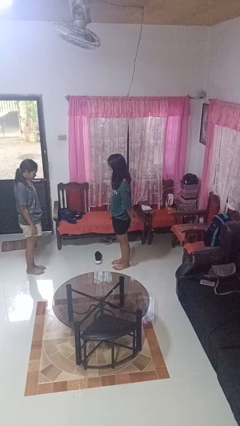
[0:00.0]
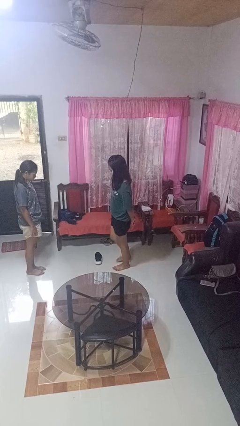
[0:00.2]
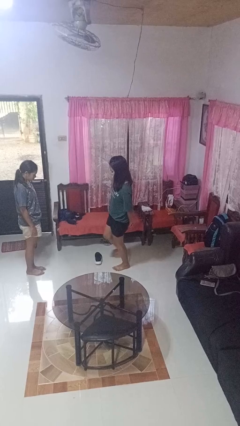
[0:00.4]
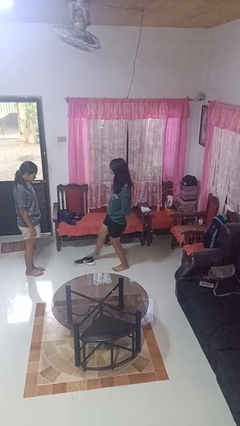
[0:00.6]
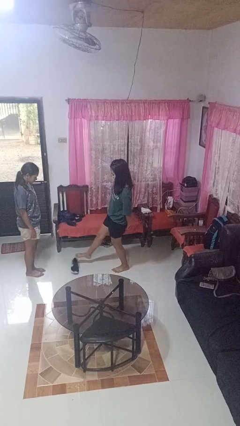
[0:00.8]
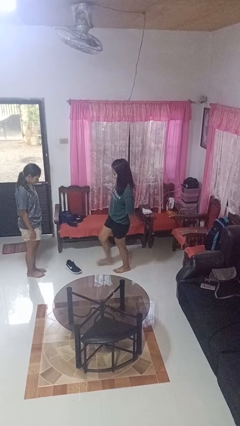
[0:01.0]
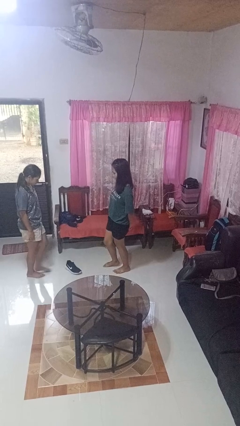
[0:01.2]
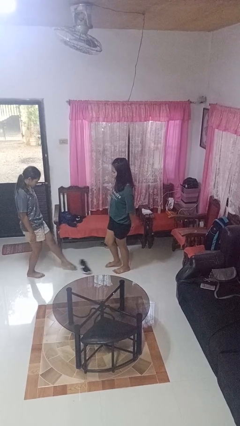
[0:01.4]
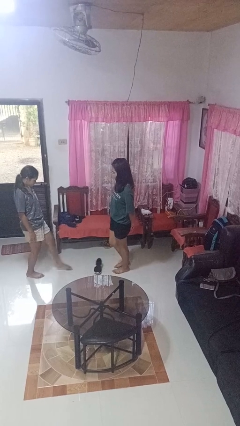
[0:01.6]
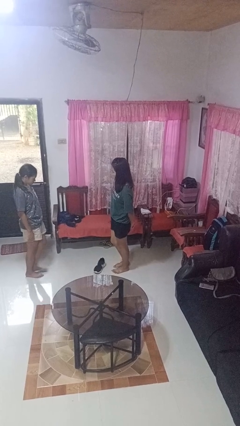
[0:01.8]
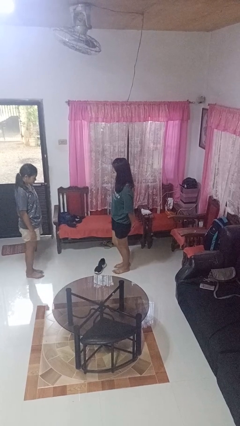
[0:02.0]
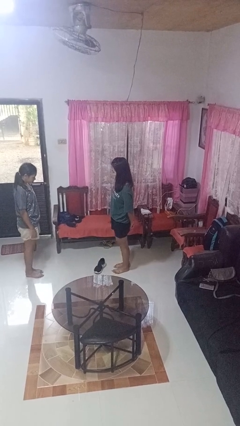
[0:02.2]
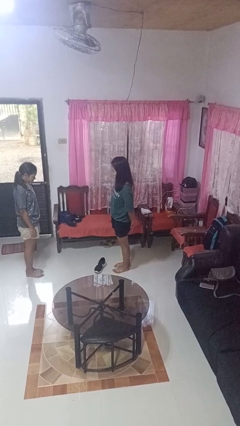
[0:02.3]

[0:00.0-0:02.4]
person kicks object to person

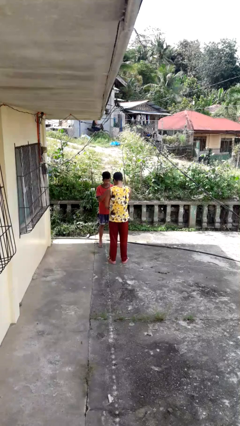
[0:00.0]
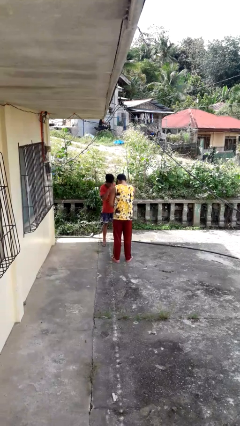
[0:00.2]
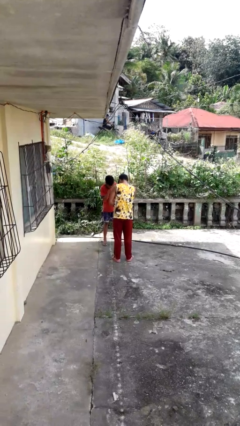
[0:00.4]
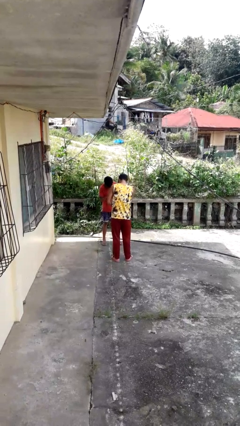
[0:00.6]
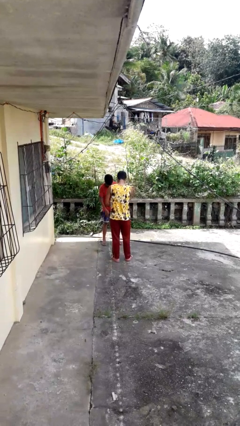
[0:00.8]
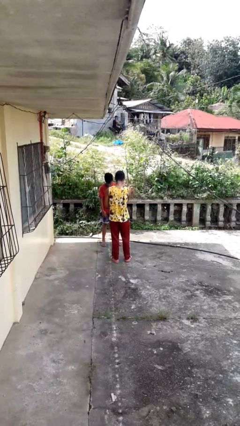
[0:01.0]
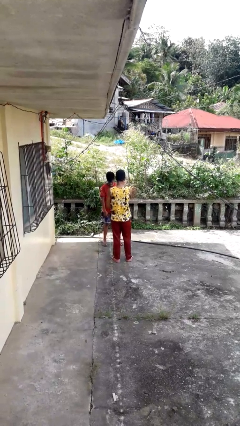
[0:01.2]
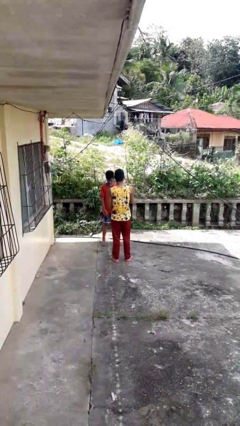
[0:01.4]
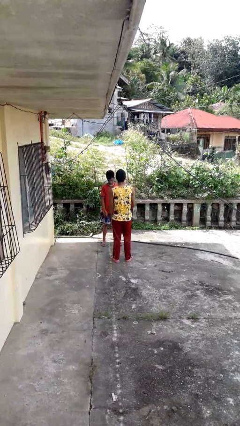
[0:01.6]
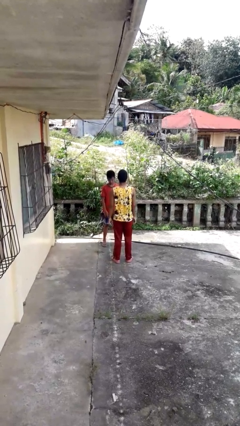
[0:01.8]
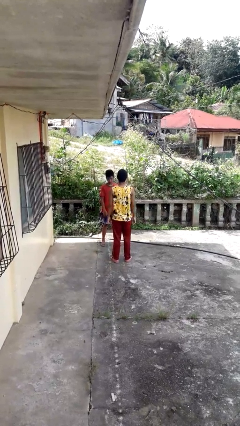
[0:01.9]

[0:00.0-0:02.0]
person laughs with person

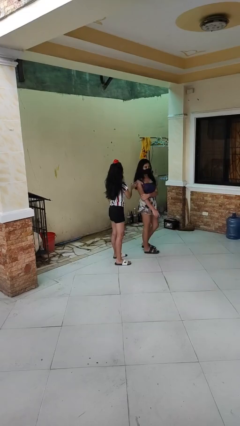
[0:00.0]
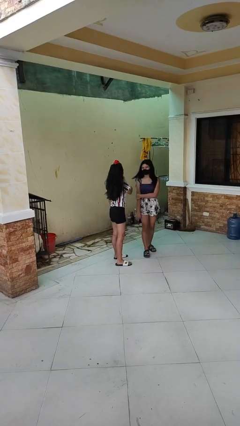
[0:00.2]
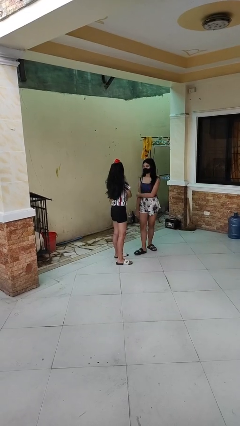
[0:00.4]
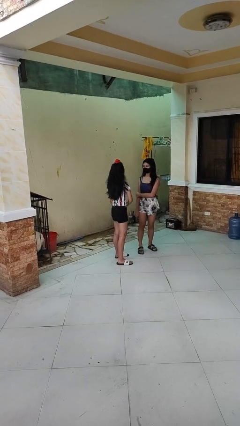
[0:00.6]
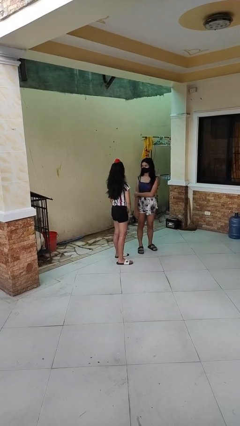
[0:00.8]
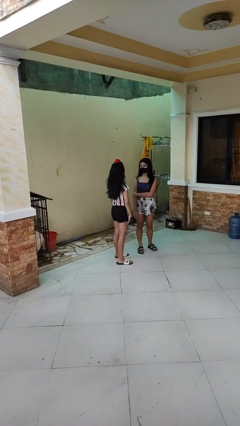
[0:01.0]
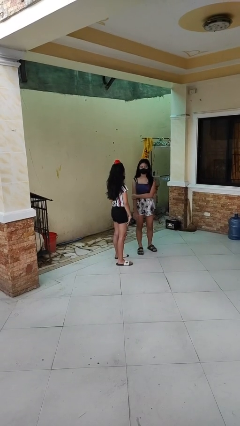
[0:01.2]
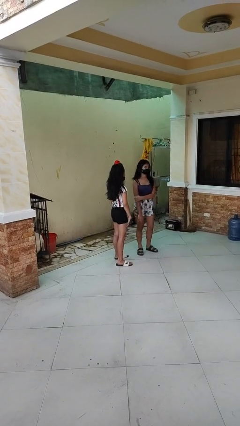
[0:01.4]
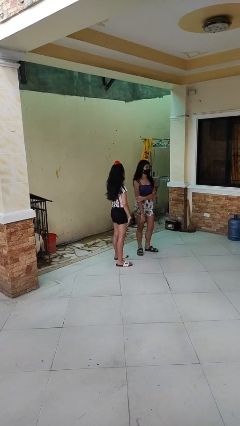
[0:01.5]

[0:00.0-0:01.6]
person spins person around

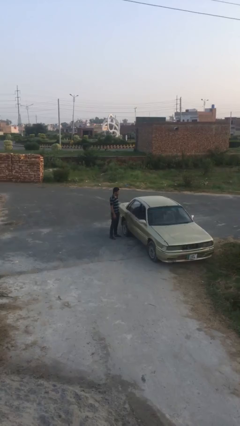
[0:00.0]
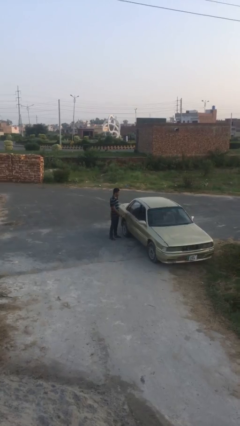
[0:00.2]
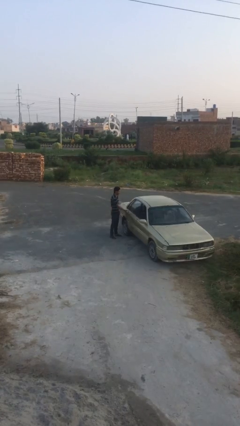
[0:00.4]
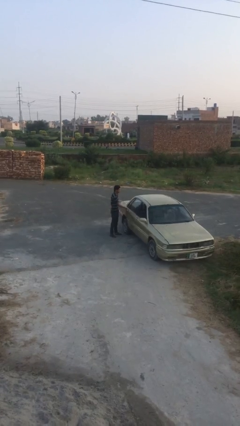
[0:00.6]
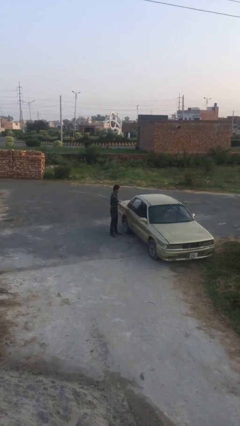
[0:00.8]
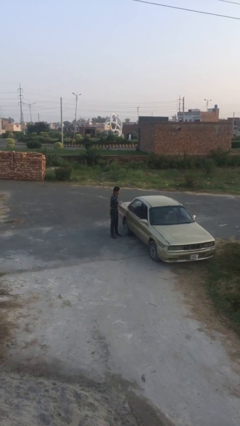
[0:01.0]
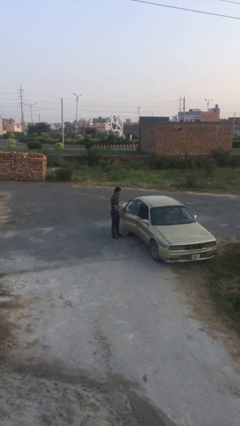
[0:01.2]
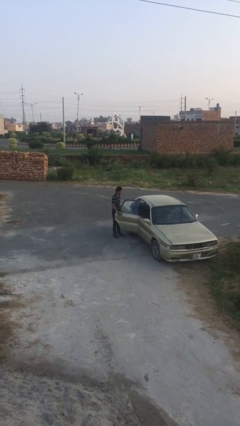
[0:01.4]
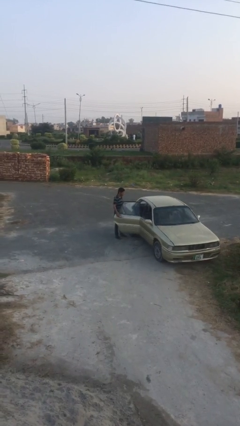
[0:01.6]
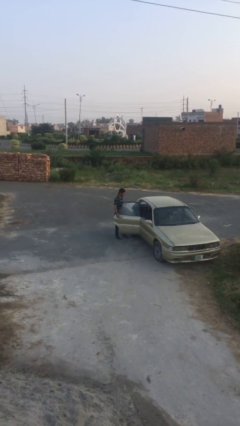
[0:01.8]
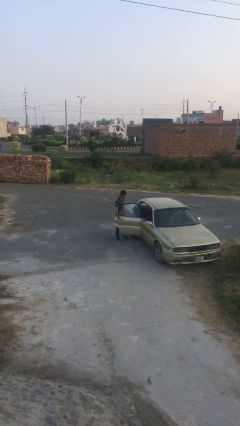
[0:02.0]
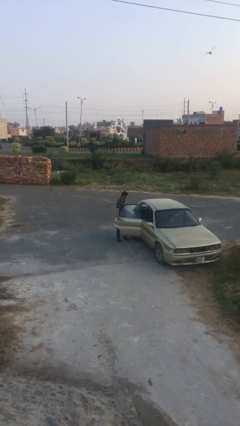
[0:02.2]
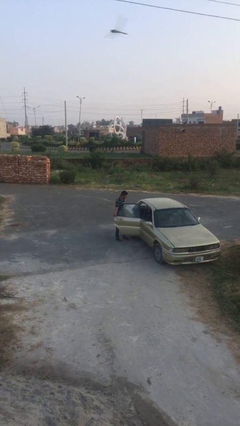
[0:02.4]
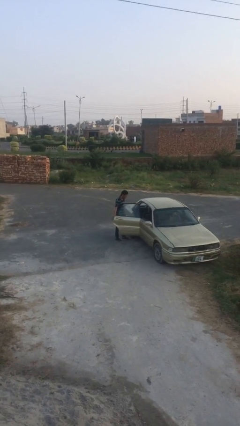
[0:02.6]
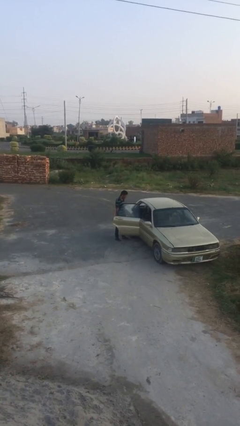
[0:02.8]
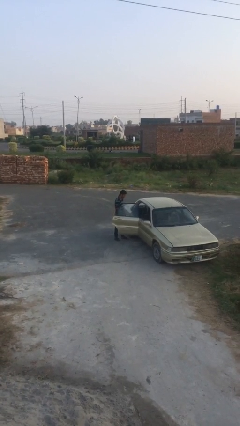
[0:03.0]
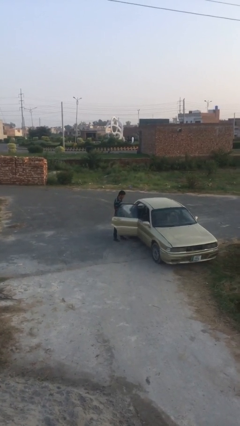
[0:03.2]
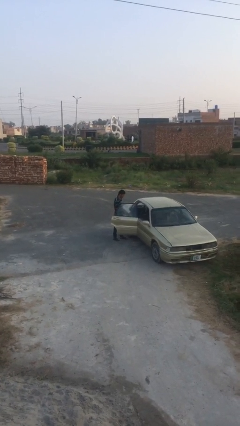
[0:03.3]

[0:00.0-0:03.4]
person opens car door

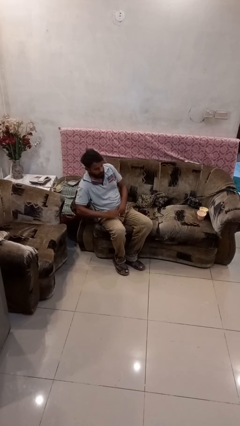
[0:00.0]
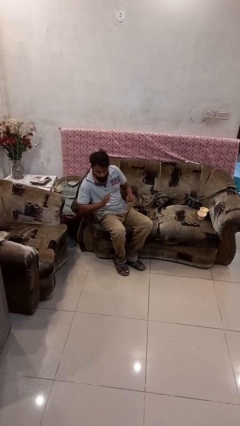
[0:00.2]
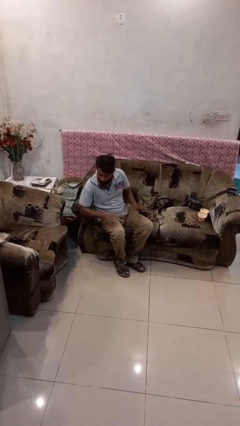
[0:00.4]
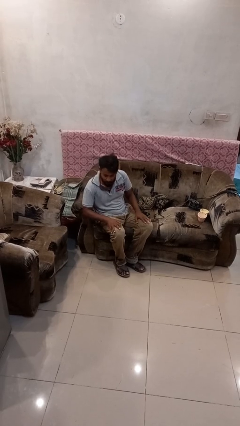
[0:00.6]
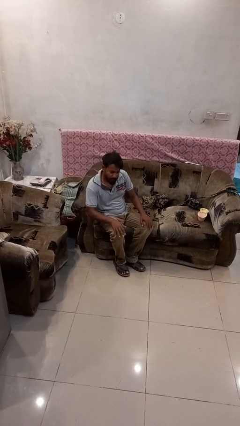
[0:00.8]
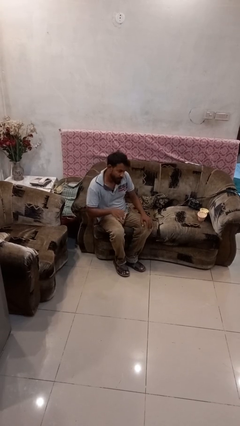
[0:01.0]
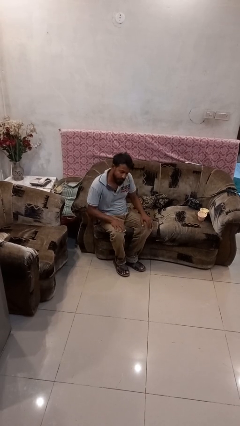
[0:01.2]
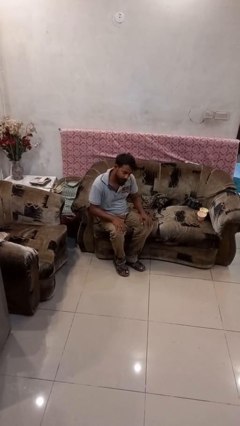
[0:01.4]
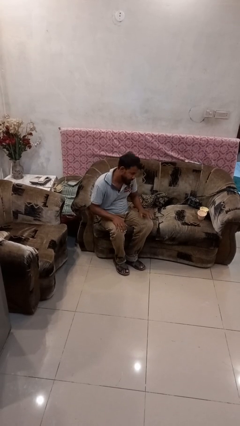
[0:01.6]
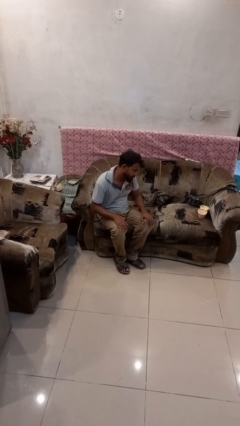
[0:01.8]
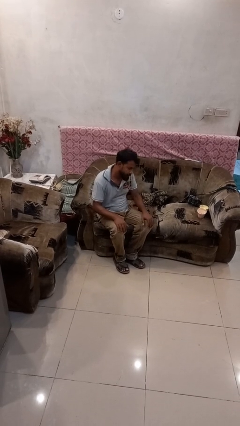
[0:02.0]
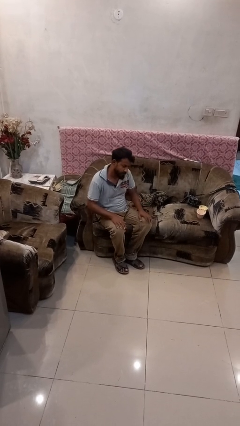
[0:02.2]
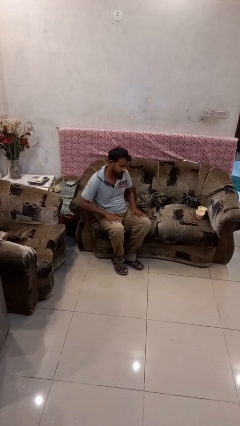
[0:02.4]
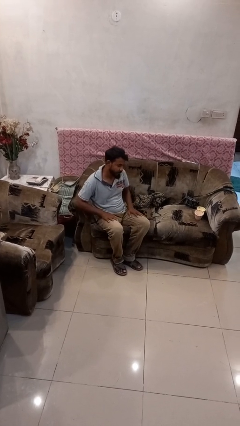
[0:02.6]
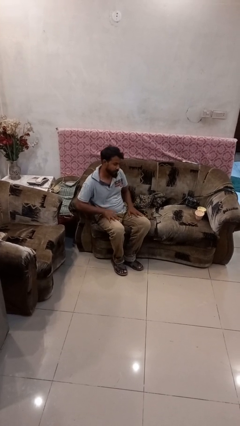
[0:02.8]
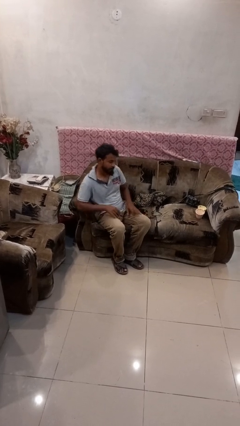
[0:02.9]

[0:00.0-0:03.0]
person slaps hands on thighs

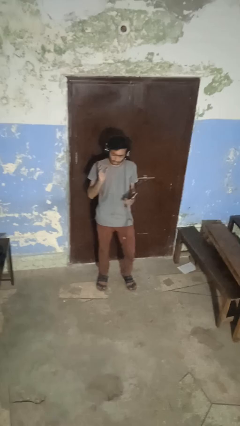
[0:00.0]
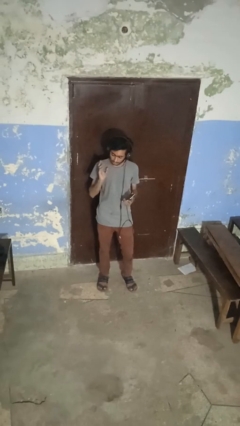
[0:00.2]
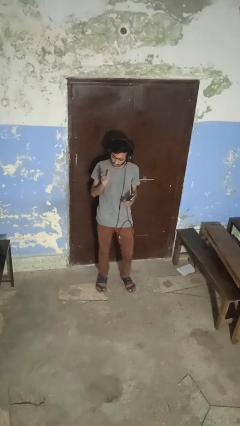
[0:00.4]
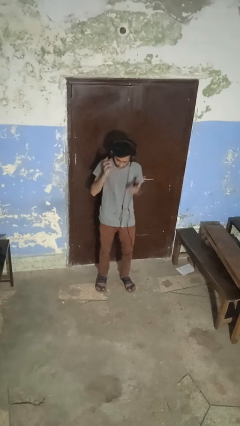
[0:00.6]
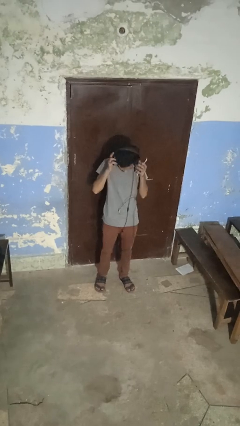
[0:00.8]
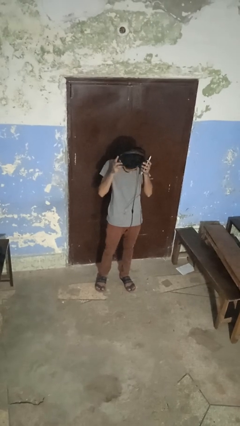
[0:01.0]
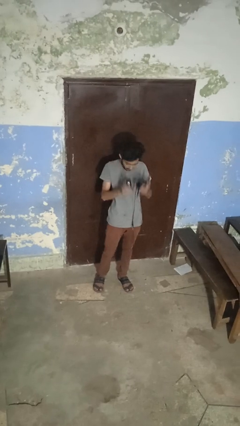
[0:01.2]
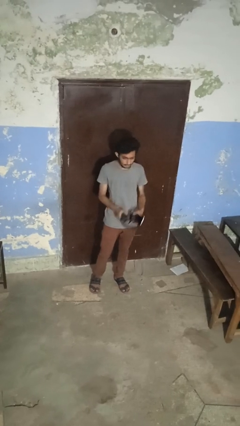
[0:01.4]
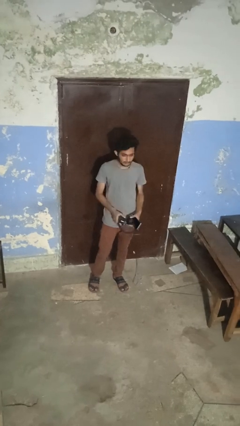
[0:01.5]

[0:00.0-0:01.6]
person takes off headphones

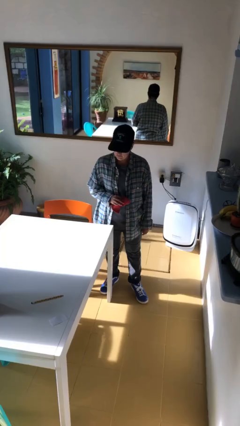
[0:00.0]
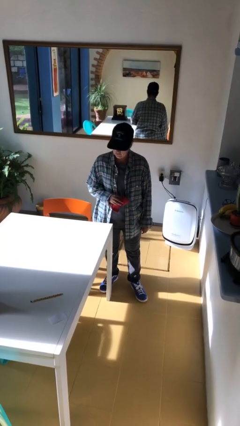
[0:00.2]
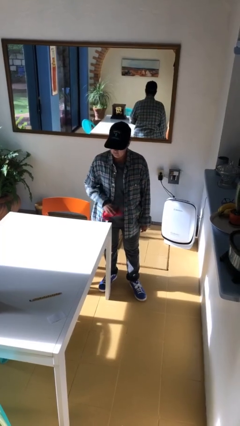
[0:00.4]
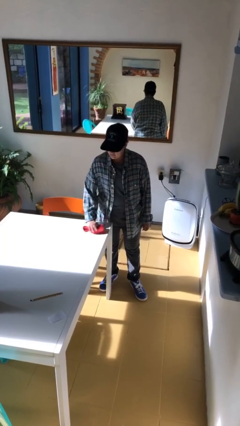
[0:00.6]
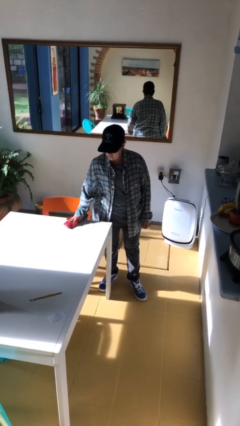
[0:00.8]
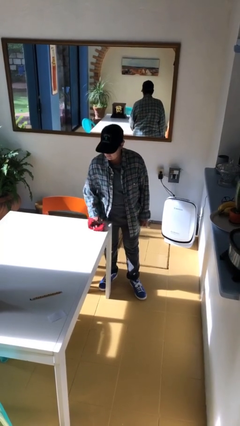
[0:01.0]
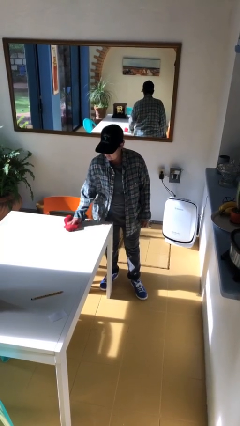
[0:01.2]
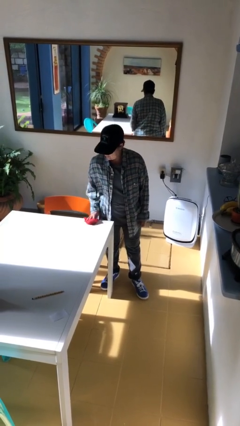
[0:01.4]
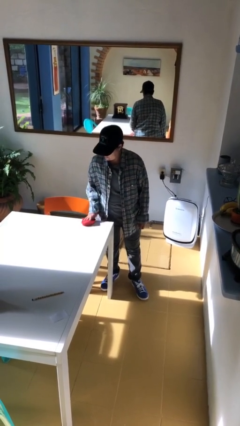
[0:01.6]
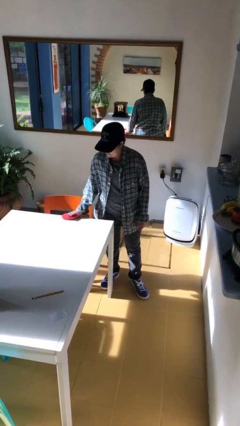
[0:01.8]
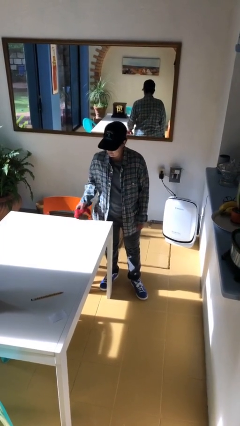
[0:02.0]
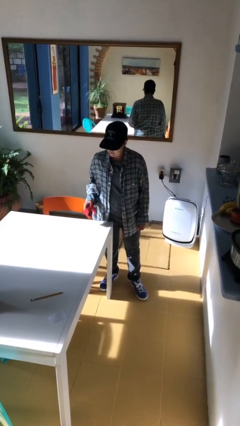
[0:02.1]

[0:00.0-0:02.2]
person cleans table with rag

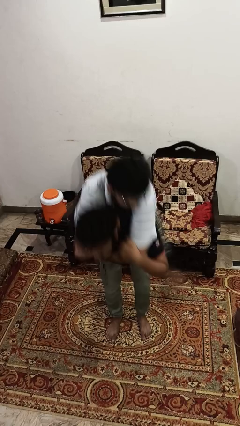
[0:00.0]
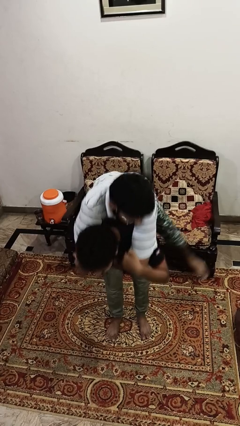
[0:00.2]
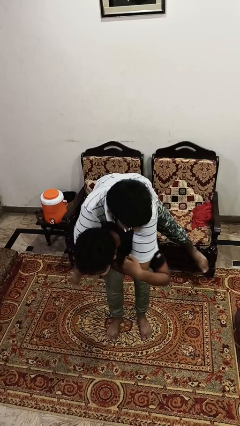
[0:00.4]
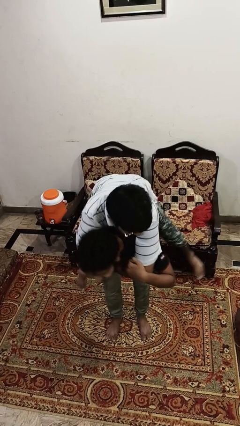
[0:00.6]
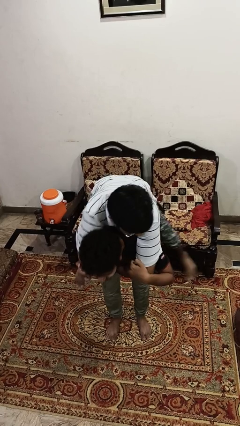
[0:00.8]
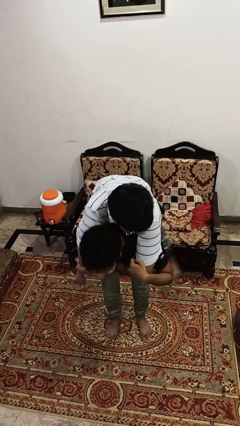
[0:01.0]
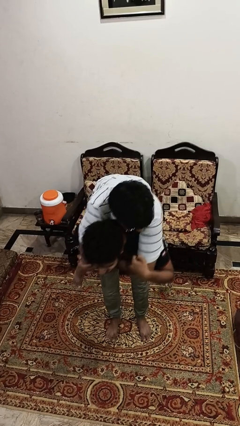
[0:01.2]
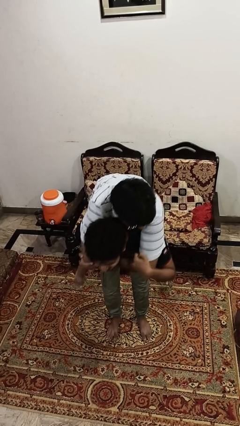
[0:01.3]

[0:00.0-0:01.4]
person carries person over shoulder
